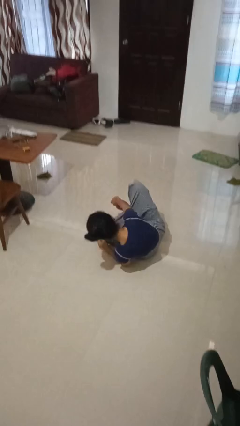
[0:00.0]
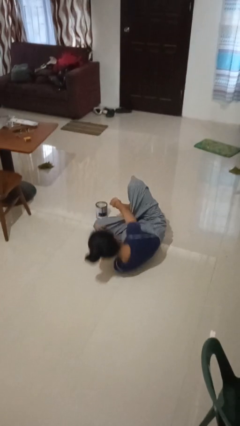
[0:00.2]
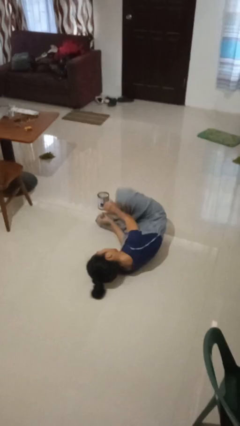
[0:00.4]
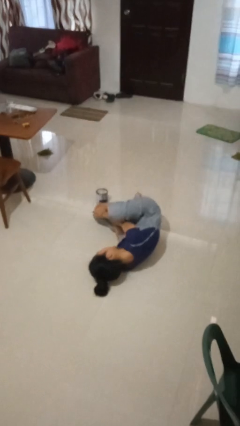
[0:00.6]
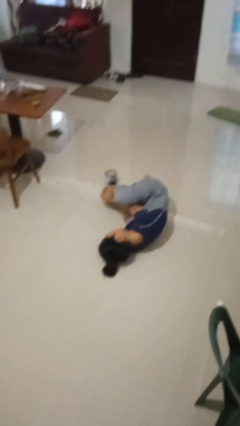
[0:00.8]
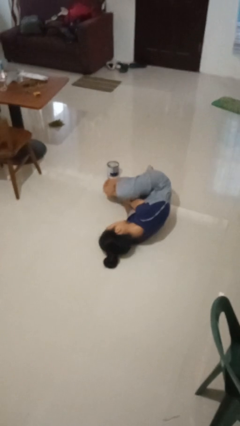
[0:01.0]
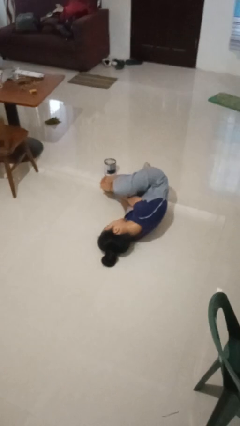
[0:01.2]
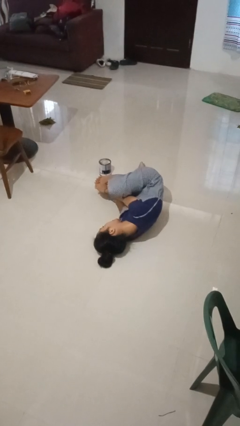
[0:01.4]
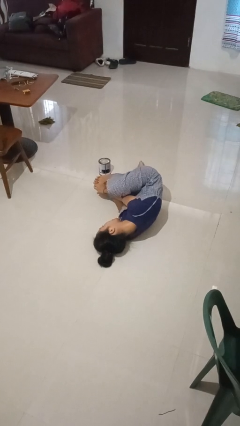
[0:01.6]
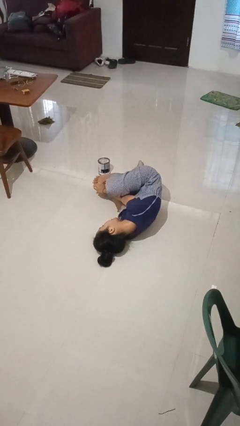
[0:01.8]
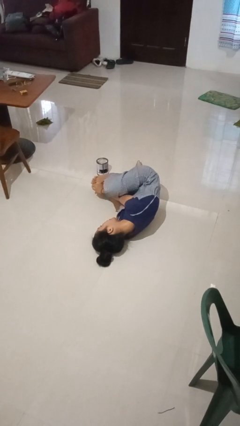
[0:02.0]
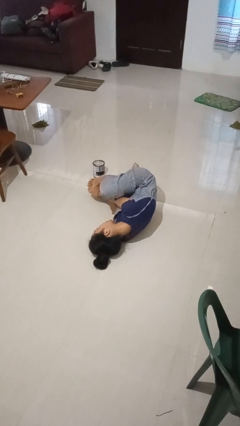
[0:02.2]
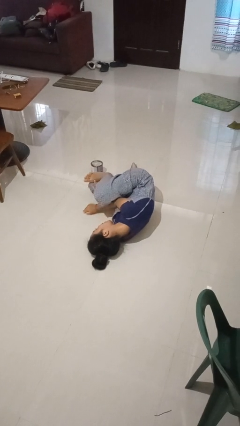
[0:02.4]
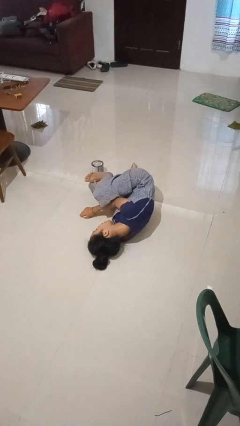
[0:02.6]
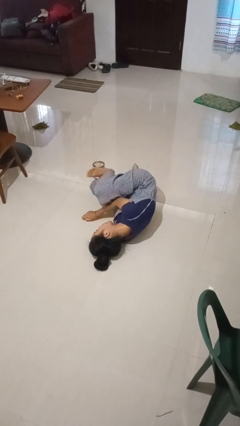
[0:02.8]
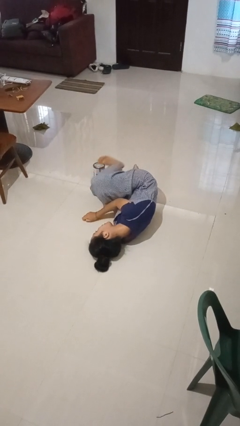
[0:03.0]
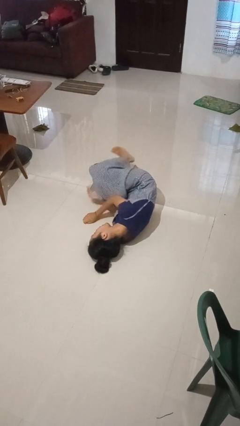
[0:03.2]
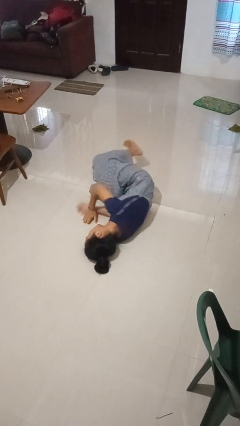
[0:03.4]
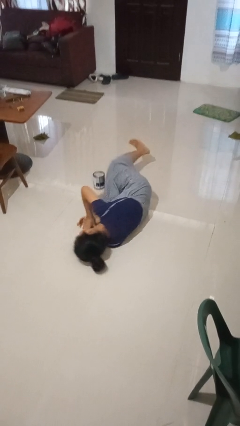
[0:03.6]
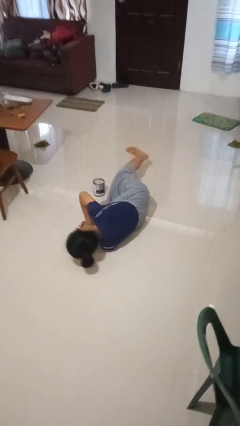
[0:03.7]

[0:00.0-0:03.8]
person lies down on floor

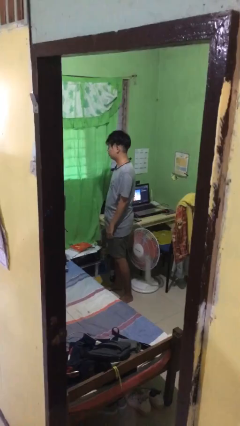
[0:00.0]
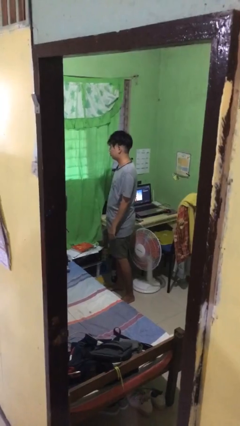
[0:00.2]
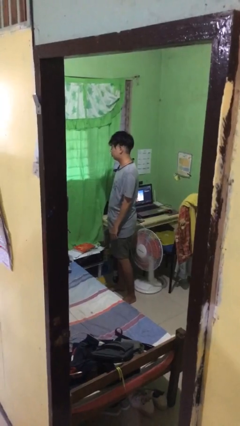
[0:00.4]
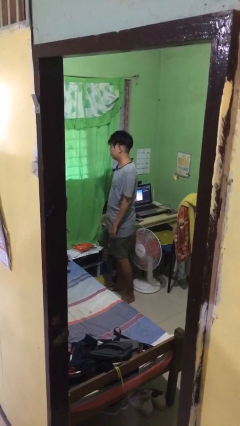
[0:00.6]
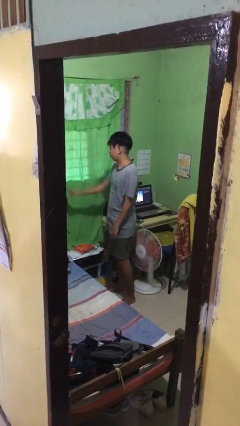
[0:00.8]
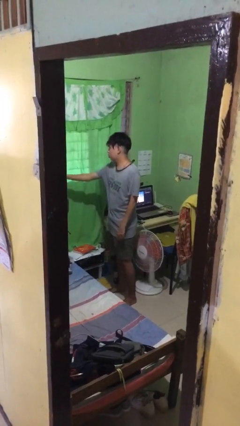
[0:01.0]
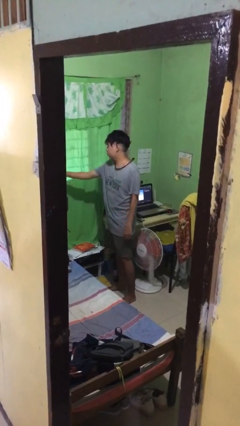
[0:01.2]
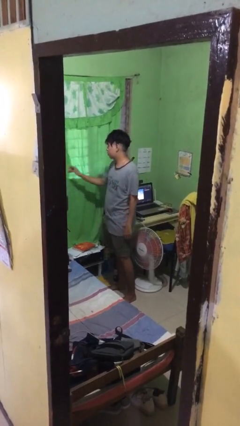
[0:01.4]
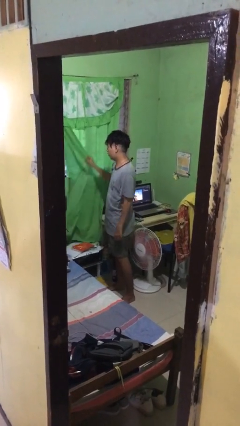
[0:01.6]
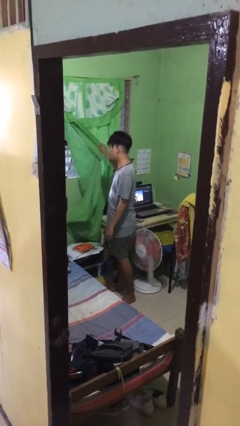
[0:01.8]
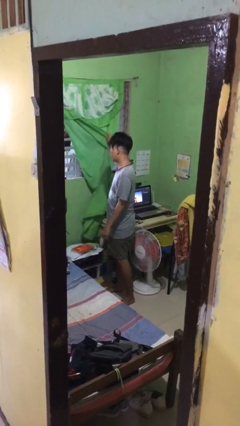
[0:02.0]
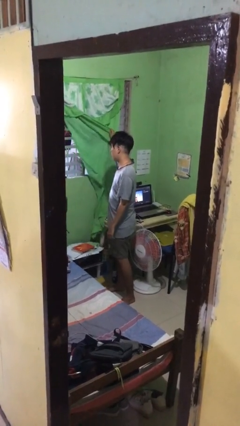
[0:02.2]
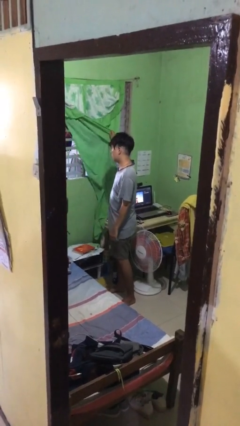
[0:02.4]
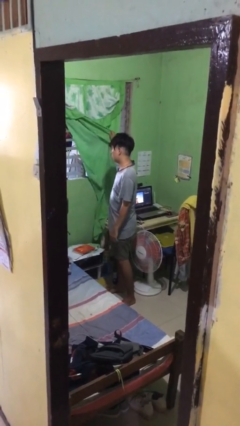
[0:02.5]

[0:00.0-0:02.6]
person opens curtains

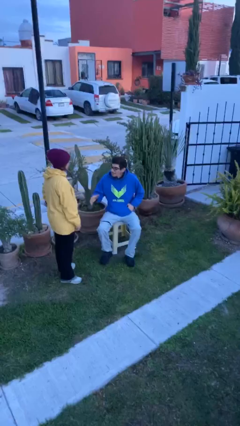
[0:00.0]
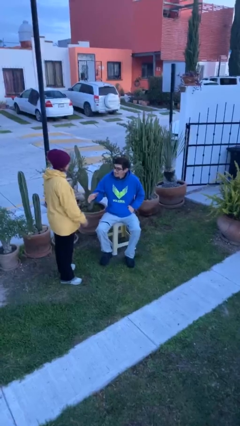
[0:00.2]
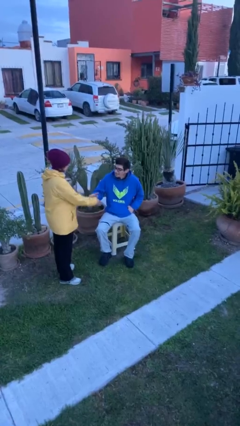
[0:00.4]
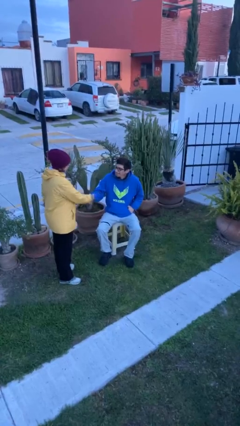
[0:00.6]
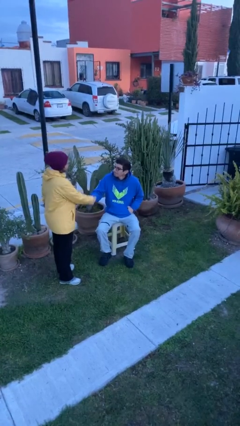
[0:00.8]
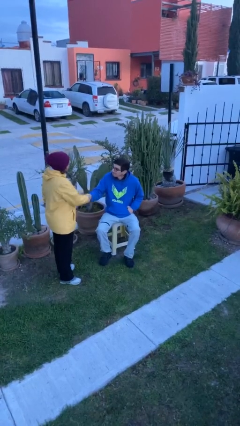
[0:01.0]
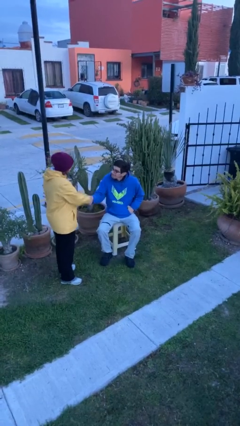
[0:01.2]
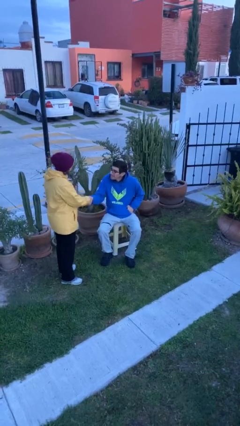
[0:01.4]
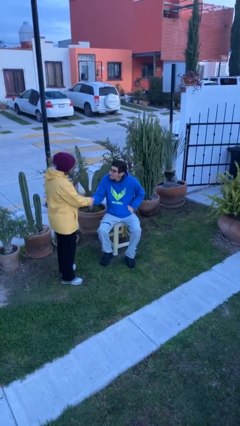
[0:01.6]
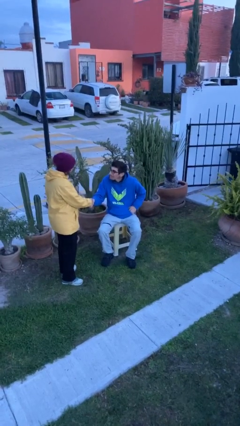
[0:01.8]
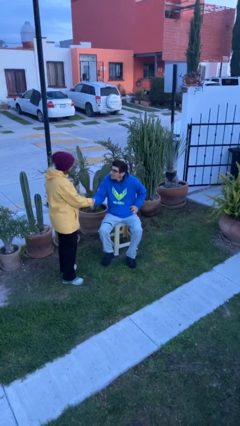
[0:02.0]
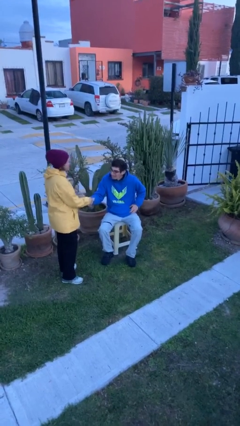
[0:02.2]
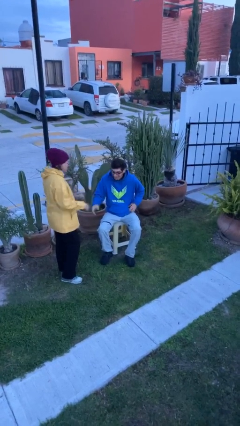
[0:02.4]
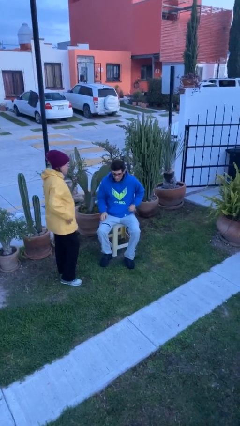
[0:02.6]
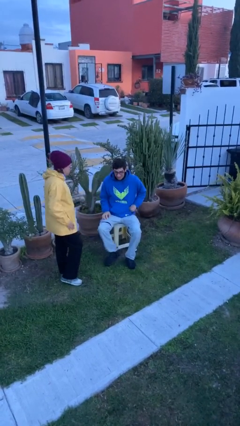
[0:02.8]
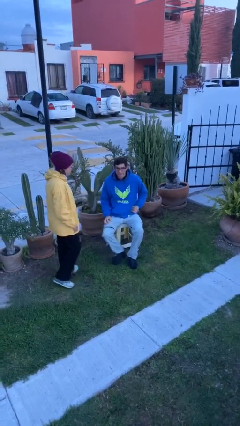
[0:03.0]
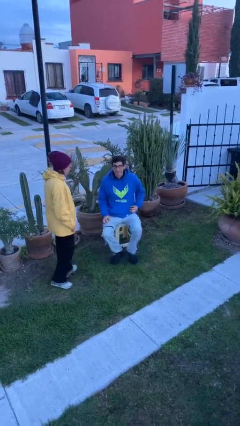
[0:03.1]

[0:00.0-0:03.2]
person shakes hand

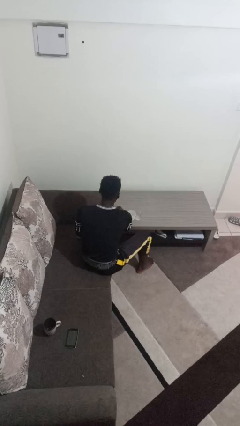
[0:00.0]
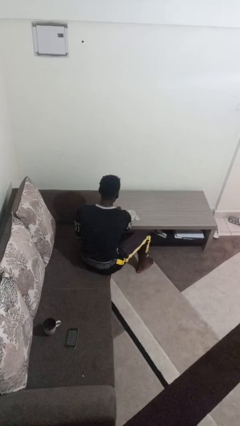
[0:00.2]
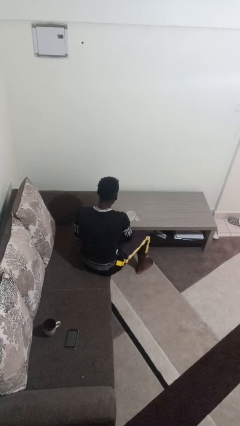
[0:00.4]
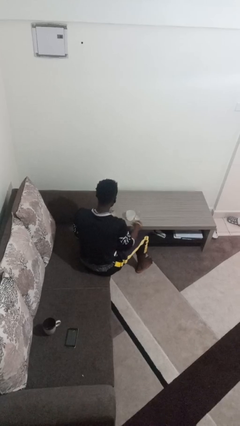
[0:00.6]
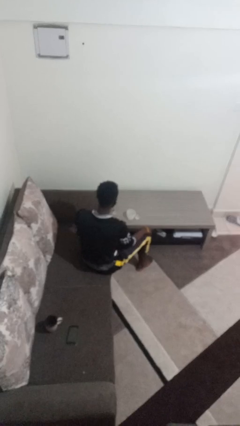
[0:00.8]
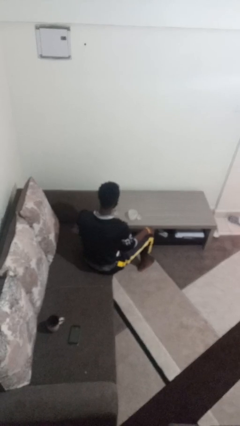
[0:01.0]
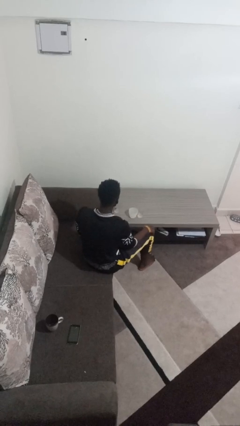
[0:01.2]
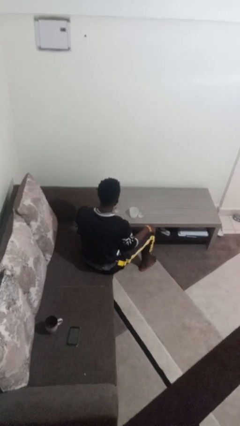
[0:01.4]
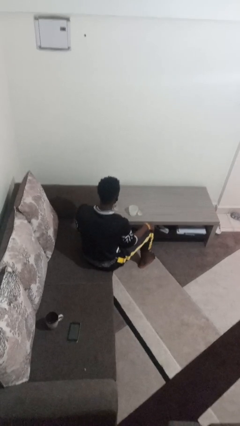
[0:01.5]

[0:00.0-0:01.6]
person puts down object on table

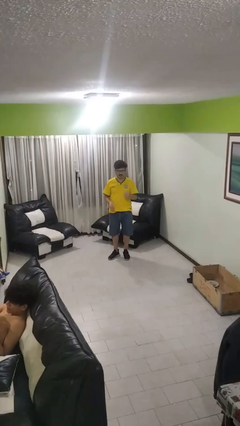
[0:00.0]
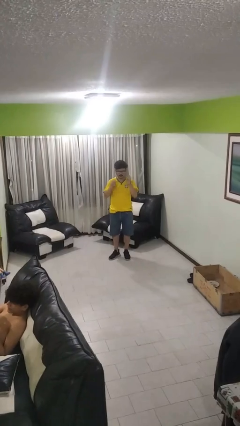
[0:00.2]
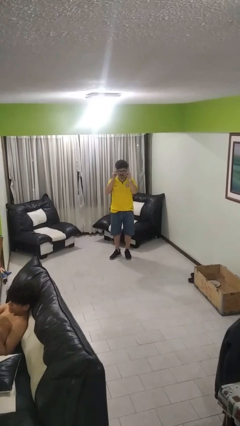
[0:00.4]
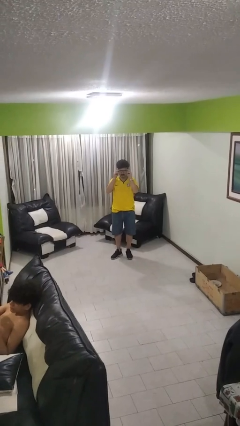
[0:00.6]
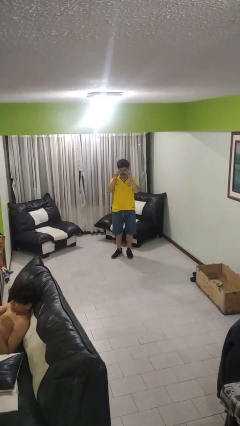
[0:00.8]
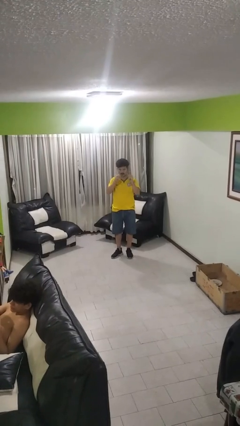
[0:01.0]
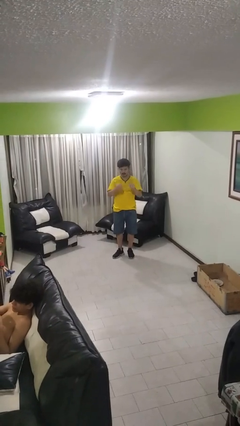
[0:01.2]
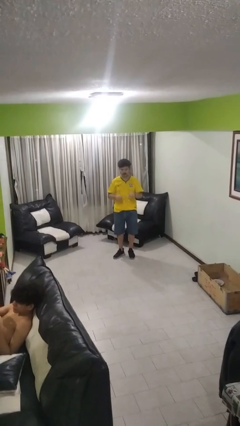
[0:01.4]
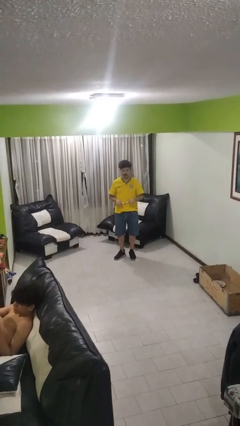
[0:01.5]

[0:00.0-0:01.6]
person takes off glasses

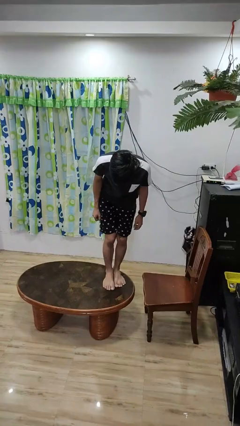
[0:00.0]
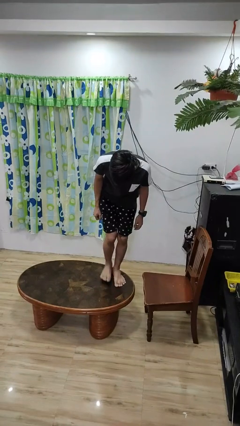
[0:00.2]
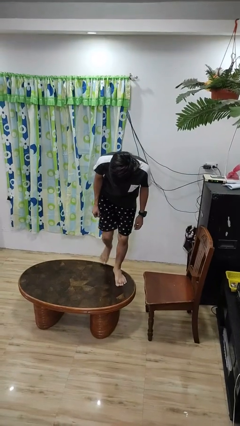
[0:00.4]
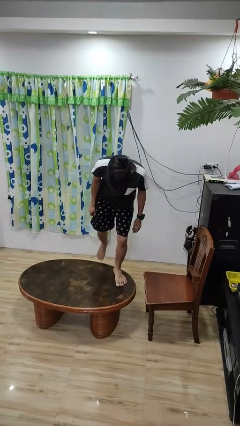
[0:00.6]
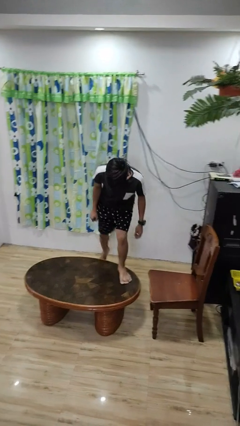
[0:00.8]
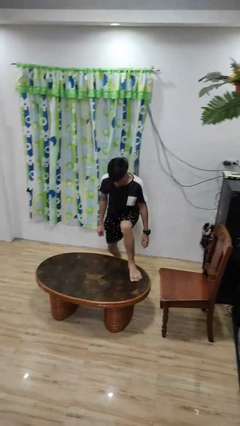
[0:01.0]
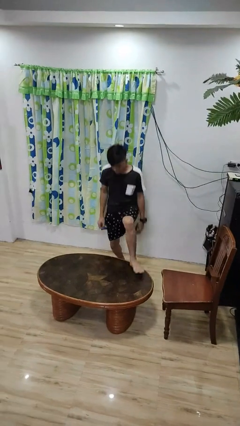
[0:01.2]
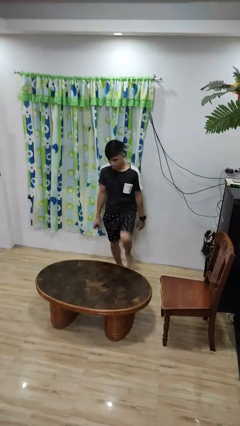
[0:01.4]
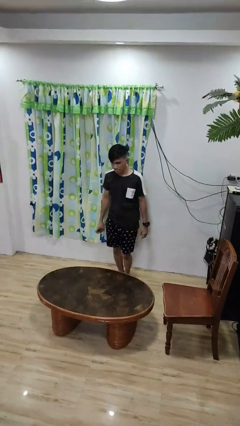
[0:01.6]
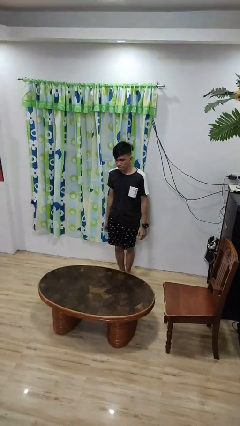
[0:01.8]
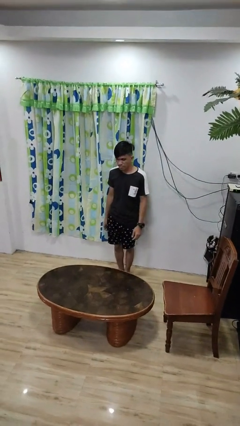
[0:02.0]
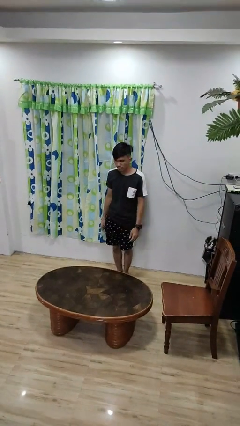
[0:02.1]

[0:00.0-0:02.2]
person climbs off table

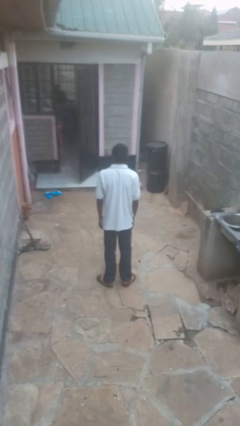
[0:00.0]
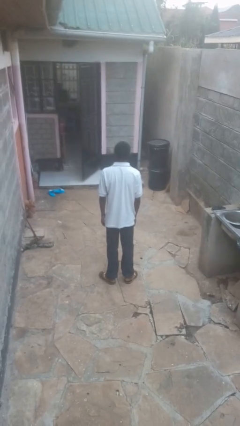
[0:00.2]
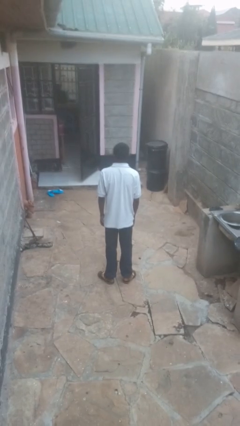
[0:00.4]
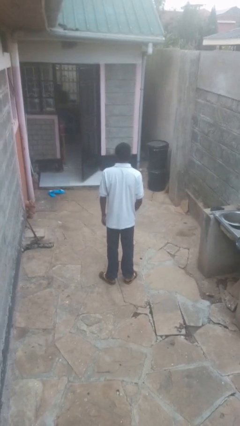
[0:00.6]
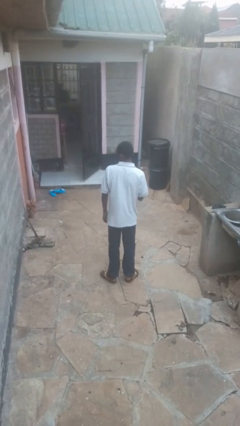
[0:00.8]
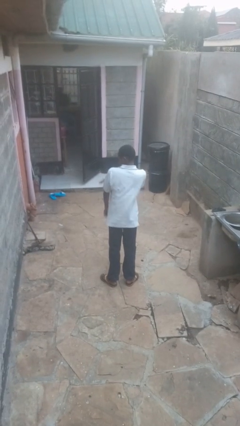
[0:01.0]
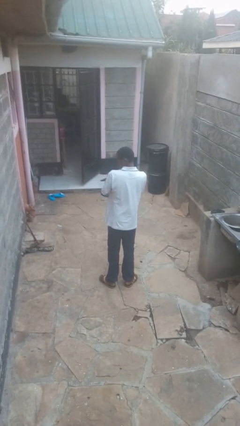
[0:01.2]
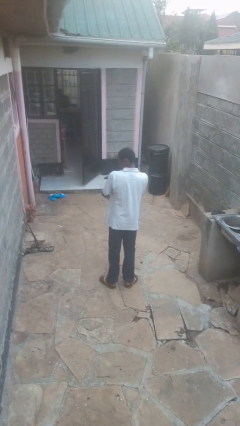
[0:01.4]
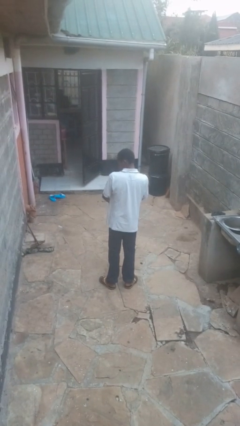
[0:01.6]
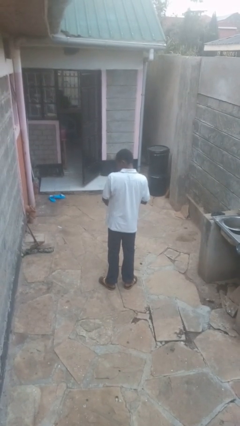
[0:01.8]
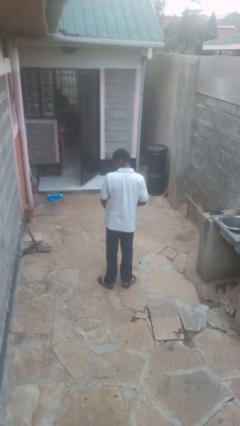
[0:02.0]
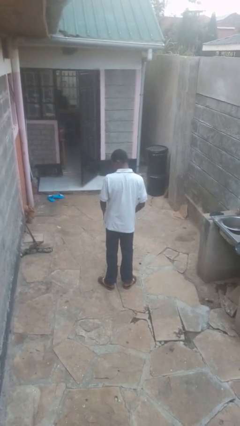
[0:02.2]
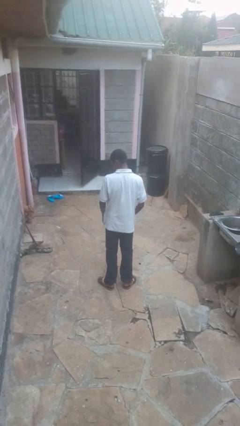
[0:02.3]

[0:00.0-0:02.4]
person swats bug
